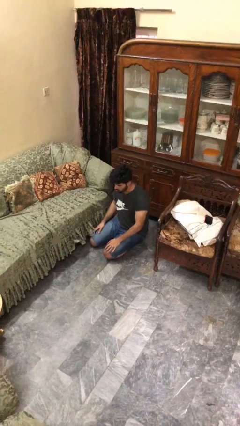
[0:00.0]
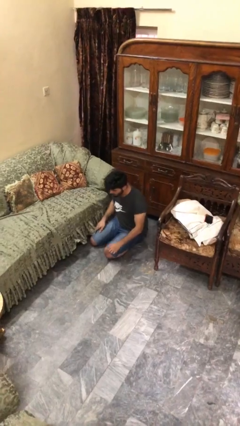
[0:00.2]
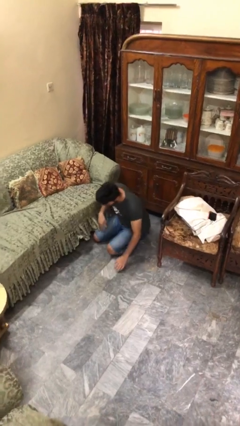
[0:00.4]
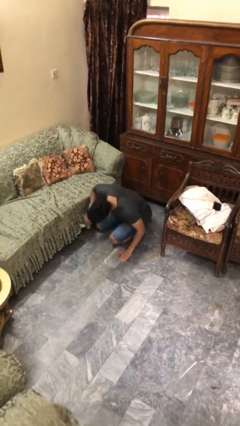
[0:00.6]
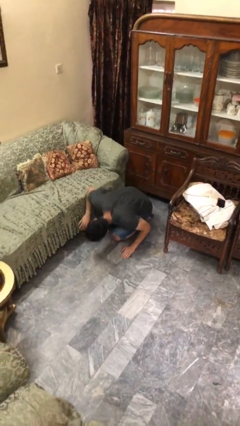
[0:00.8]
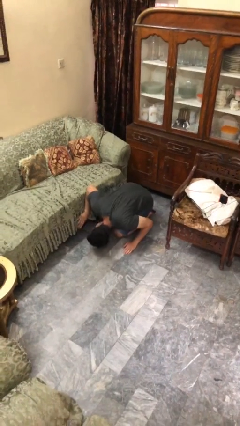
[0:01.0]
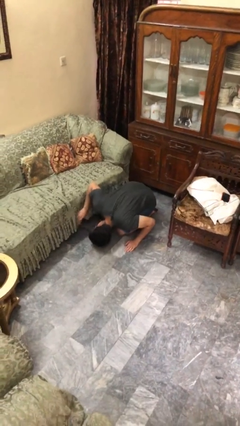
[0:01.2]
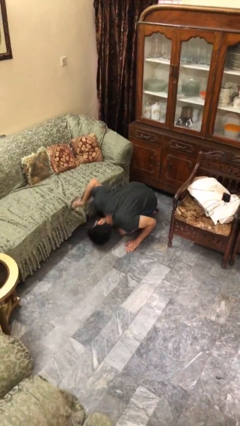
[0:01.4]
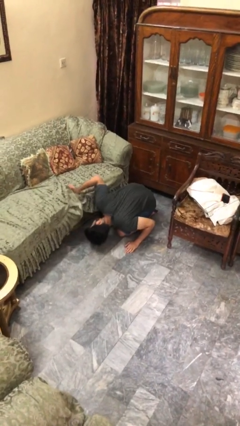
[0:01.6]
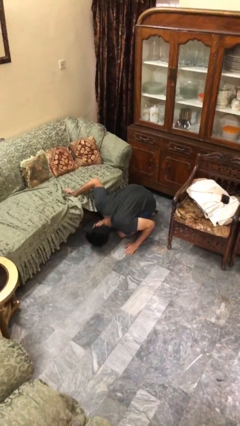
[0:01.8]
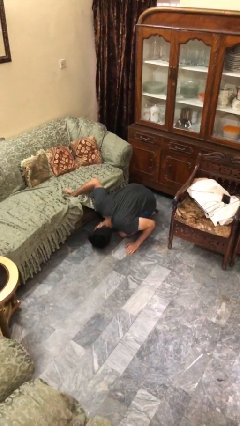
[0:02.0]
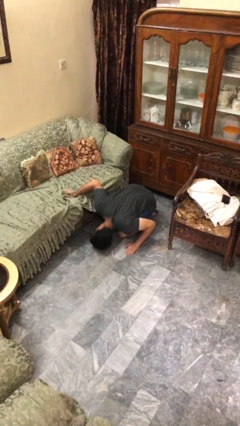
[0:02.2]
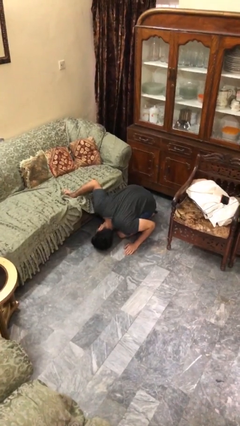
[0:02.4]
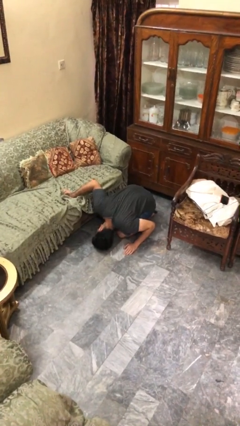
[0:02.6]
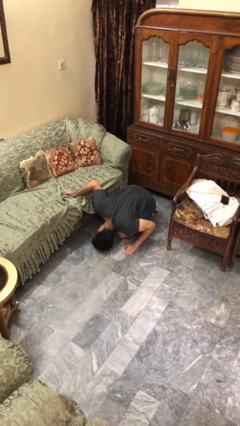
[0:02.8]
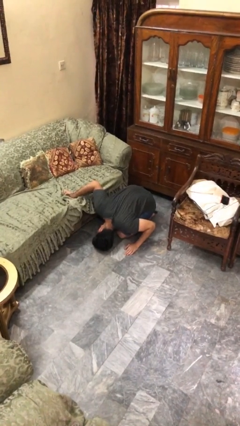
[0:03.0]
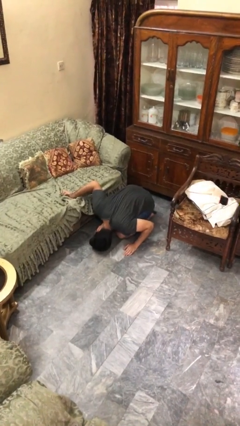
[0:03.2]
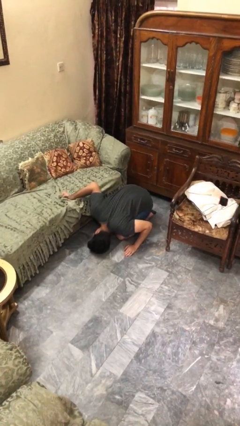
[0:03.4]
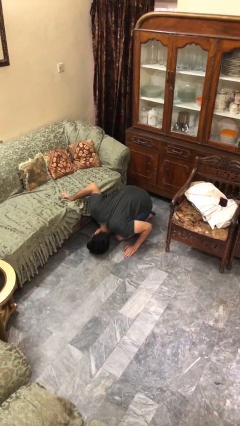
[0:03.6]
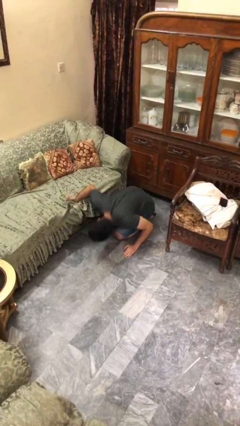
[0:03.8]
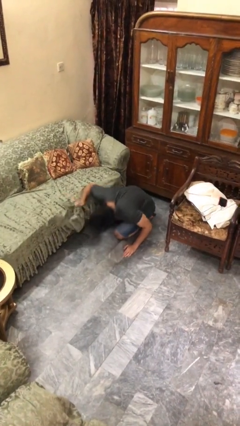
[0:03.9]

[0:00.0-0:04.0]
person searches under couch

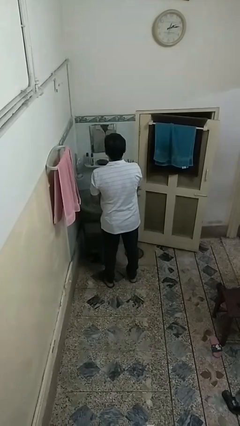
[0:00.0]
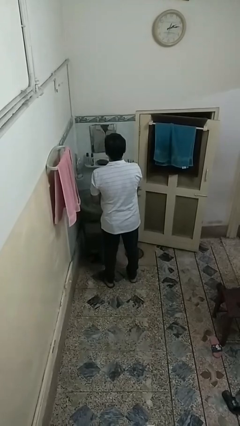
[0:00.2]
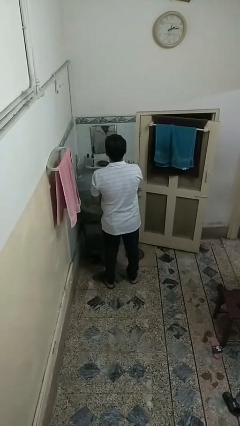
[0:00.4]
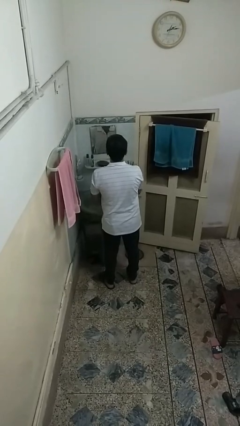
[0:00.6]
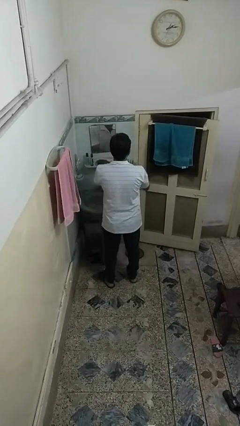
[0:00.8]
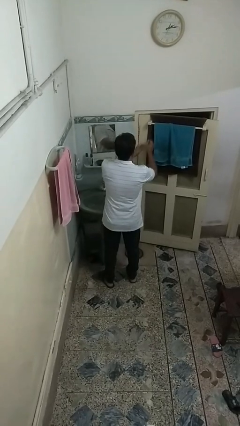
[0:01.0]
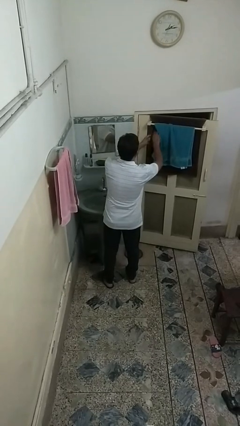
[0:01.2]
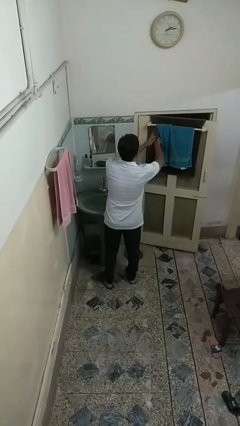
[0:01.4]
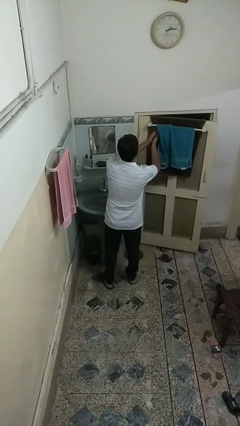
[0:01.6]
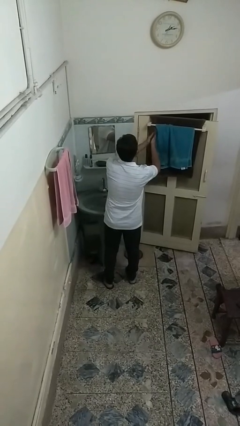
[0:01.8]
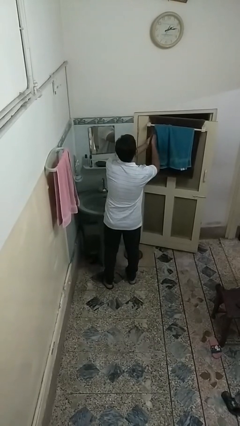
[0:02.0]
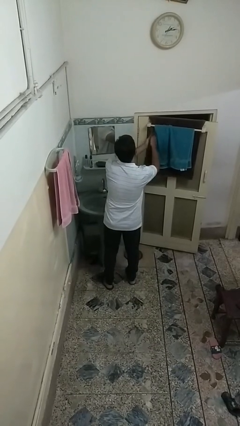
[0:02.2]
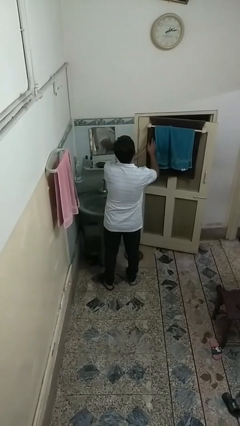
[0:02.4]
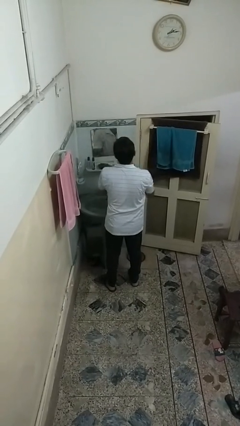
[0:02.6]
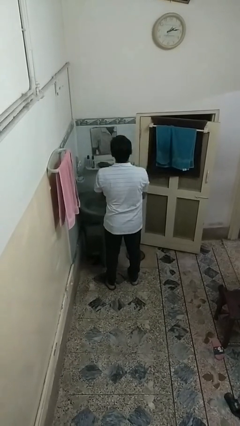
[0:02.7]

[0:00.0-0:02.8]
person dries hands with towel

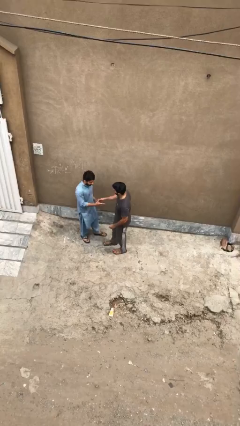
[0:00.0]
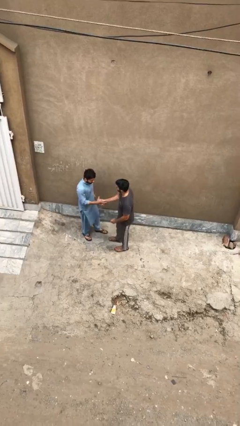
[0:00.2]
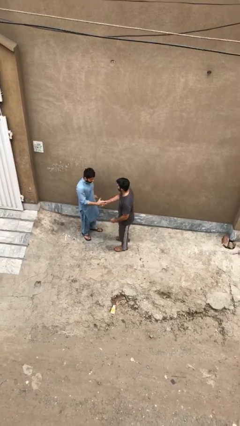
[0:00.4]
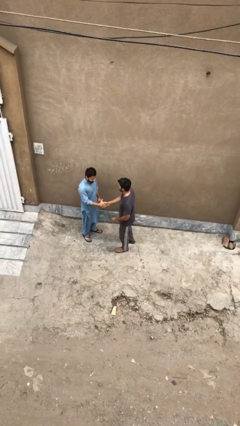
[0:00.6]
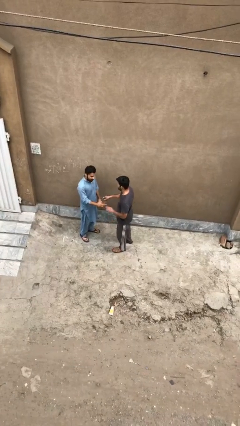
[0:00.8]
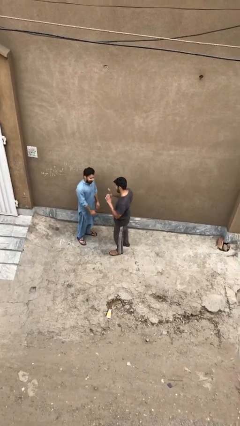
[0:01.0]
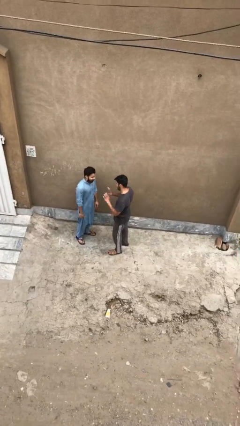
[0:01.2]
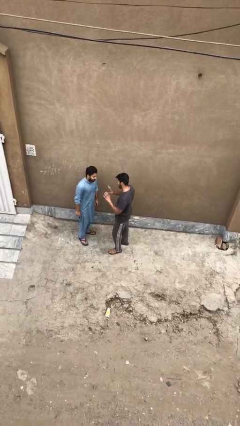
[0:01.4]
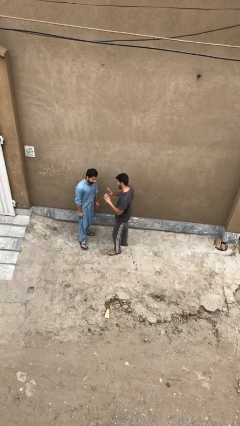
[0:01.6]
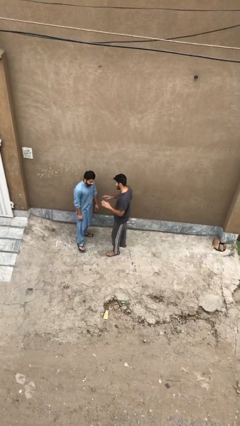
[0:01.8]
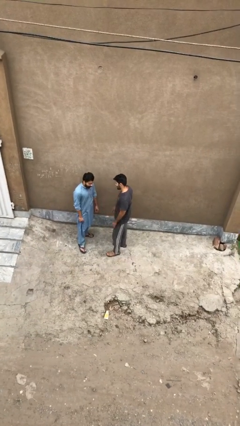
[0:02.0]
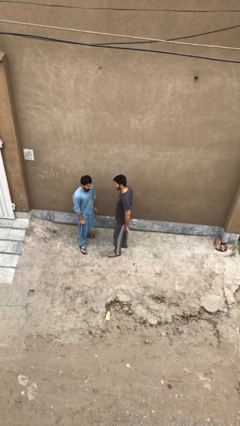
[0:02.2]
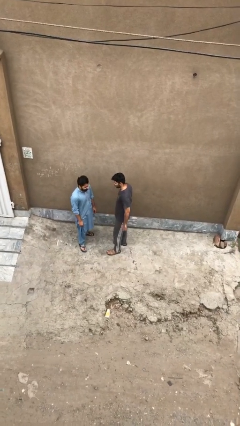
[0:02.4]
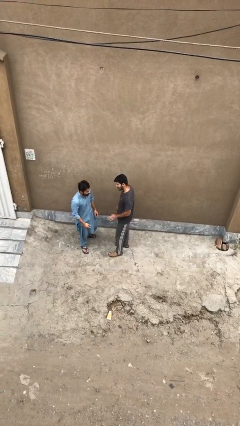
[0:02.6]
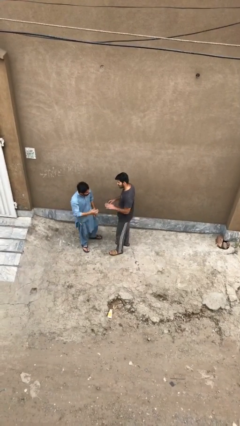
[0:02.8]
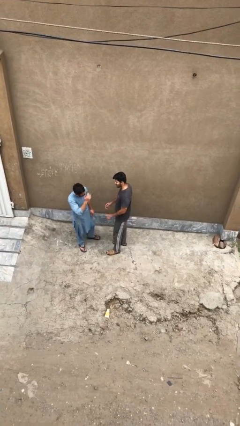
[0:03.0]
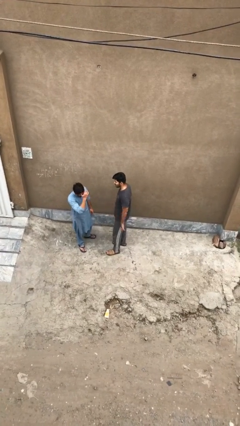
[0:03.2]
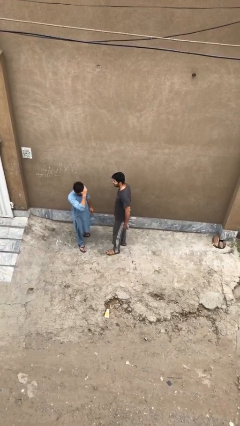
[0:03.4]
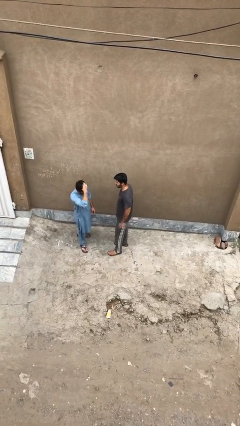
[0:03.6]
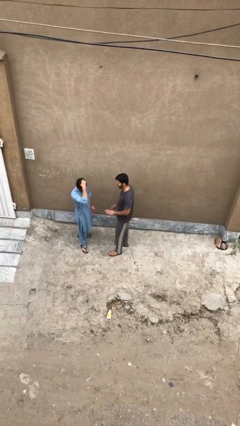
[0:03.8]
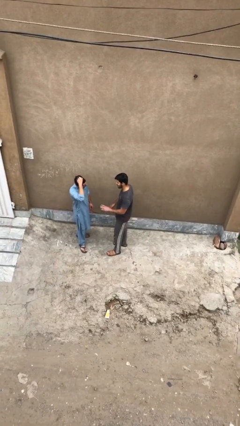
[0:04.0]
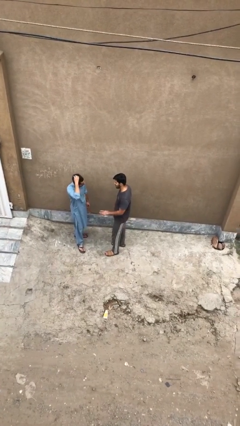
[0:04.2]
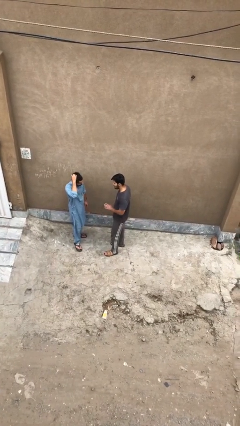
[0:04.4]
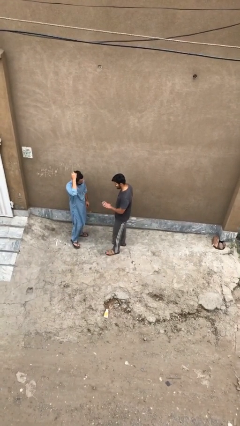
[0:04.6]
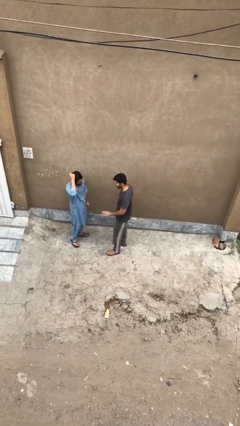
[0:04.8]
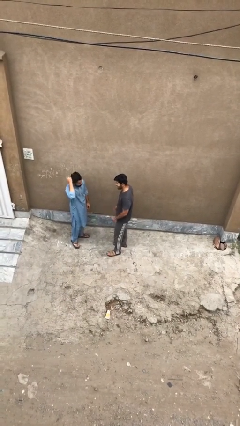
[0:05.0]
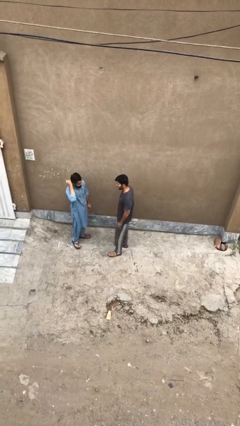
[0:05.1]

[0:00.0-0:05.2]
person talks to person

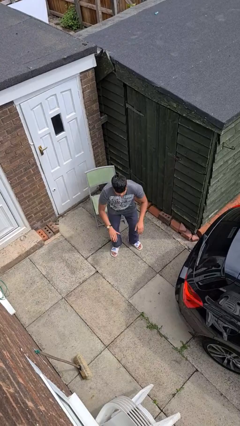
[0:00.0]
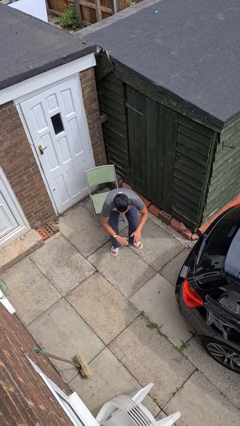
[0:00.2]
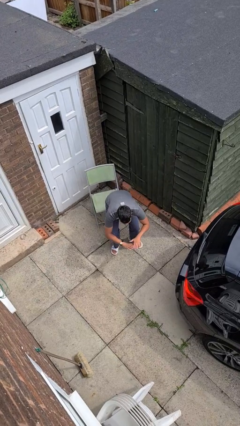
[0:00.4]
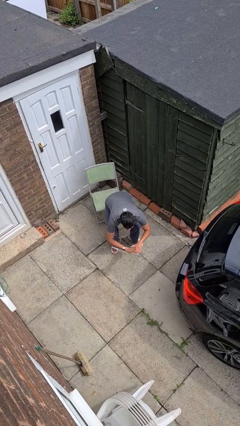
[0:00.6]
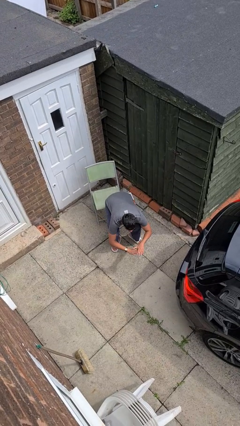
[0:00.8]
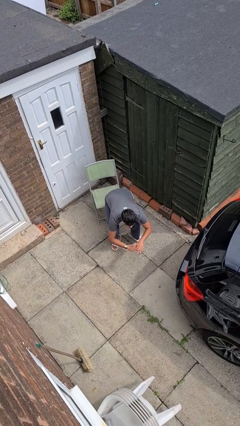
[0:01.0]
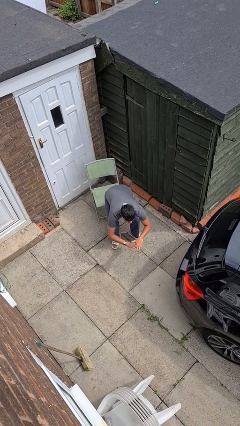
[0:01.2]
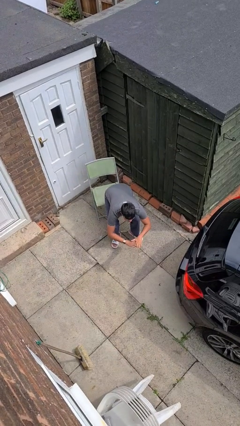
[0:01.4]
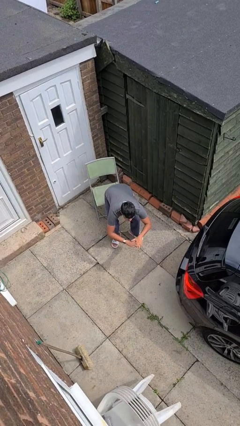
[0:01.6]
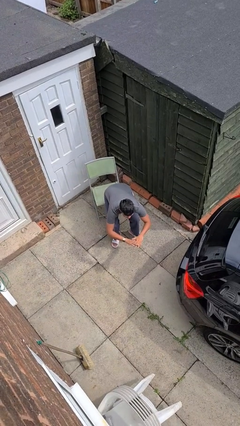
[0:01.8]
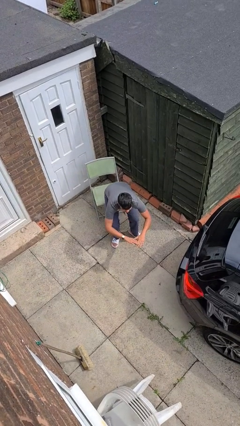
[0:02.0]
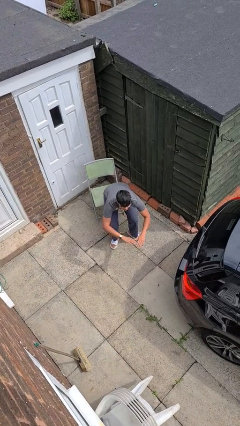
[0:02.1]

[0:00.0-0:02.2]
person squats

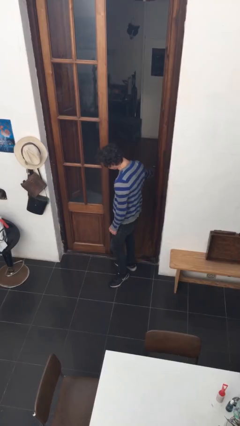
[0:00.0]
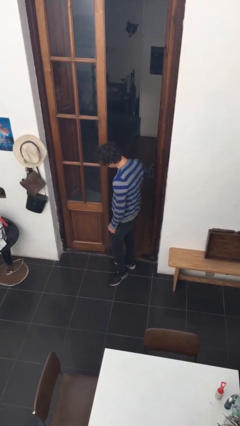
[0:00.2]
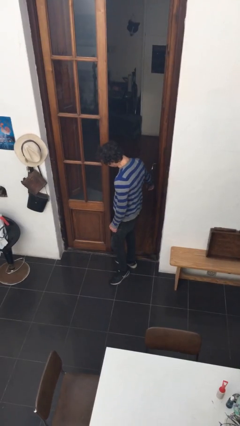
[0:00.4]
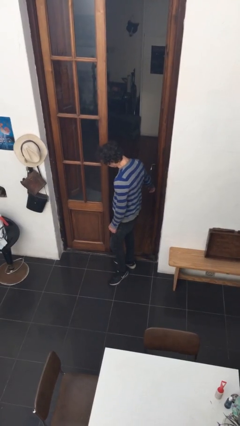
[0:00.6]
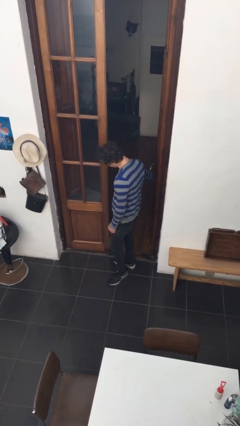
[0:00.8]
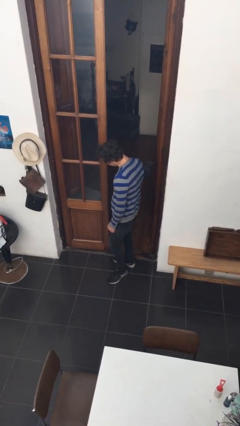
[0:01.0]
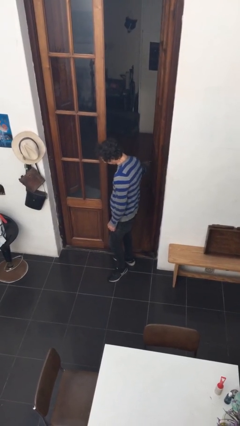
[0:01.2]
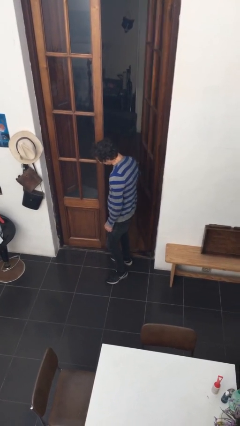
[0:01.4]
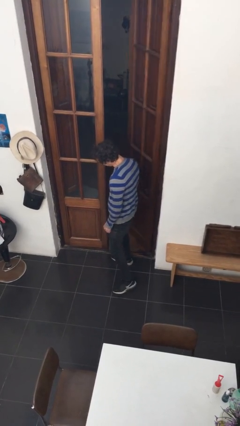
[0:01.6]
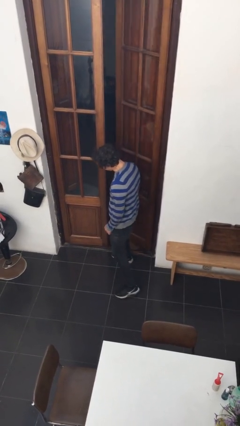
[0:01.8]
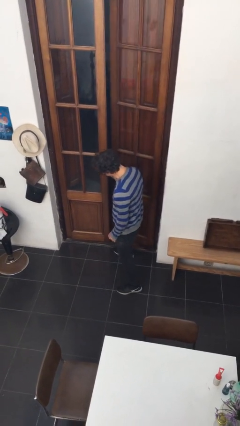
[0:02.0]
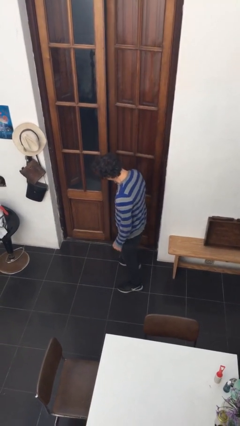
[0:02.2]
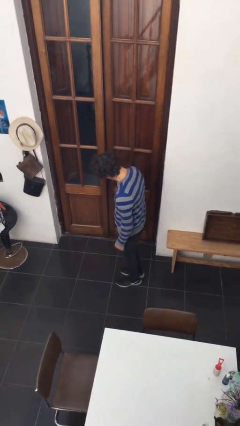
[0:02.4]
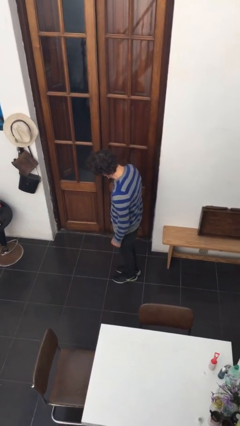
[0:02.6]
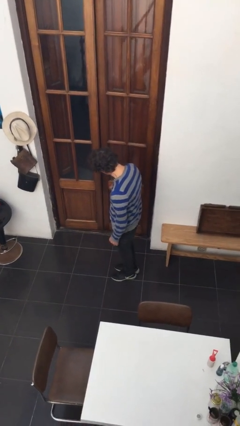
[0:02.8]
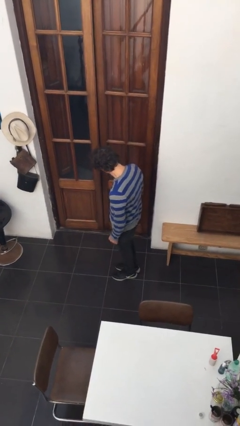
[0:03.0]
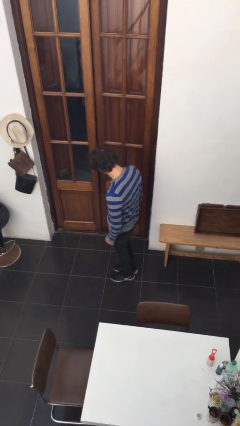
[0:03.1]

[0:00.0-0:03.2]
person closes facility door

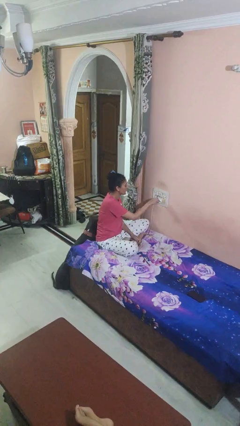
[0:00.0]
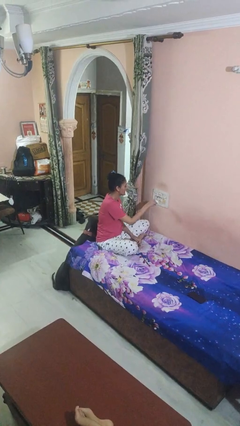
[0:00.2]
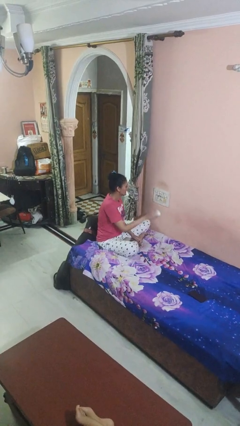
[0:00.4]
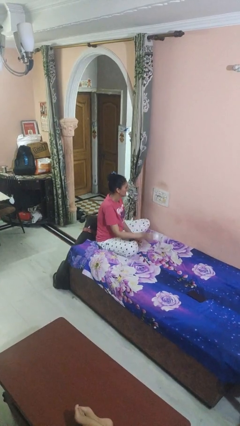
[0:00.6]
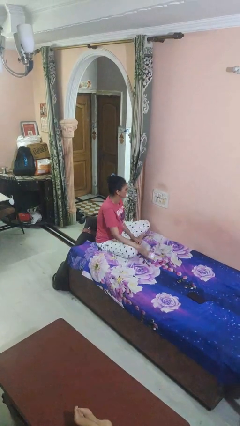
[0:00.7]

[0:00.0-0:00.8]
person unplugs from electrical socket
